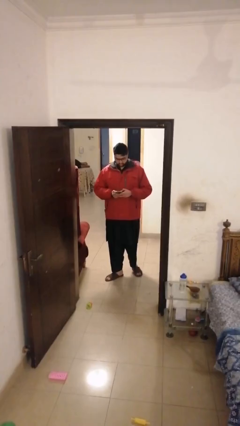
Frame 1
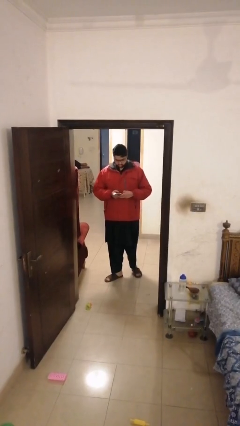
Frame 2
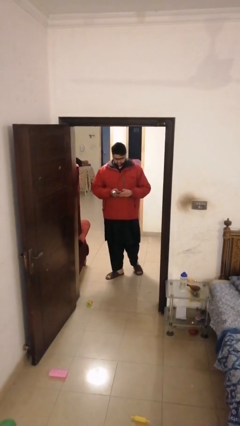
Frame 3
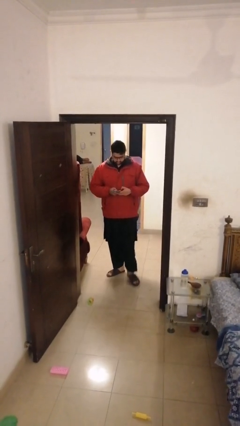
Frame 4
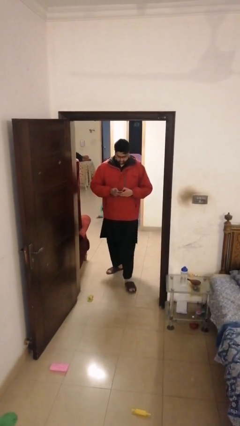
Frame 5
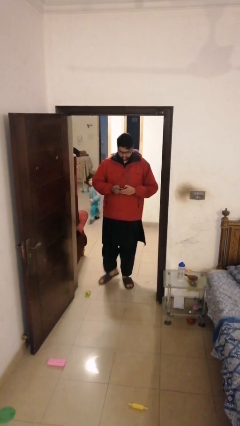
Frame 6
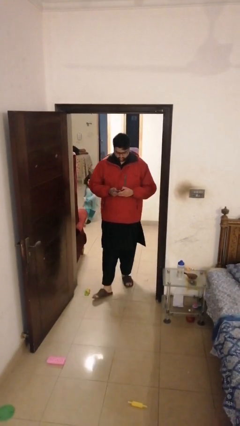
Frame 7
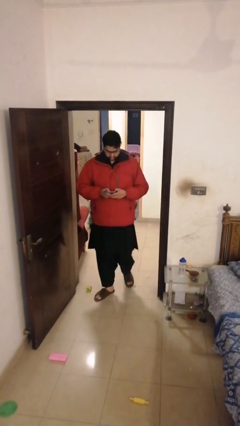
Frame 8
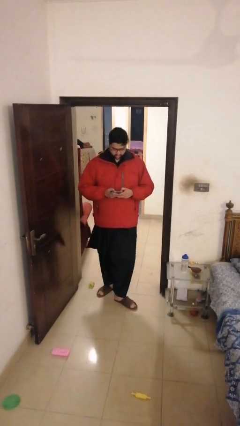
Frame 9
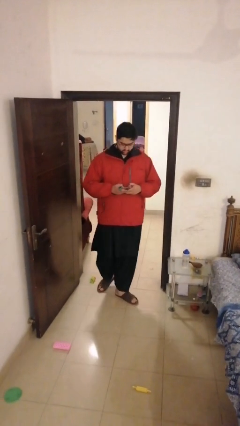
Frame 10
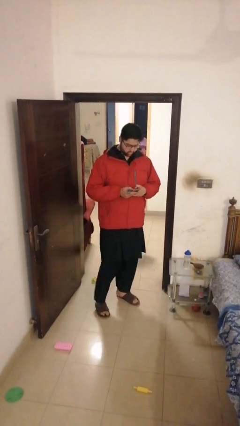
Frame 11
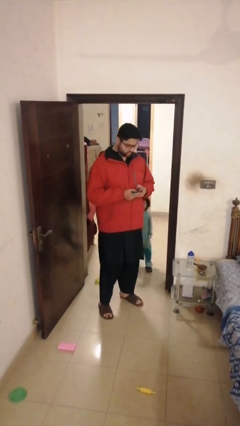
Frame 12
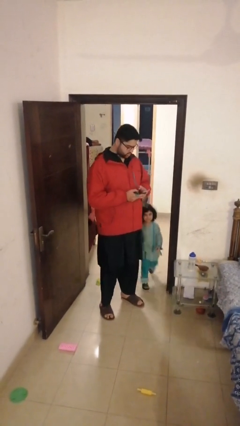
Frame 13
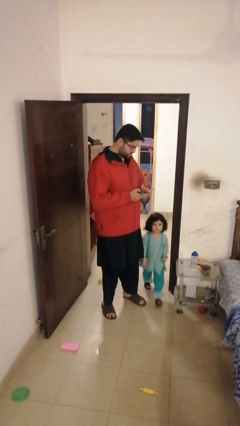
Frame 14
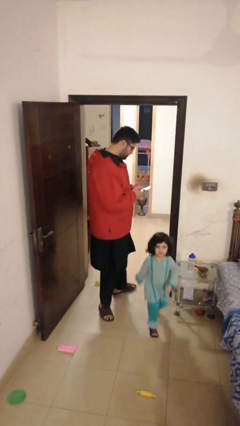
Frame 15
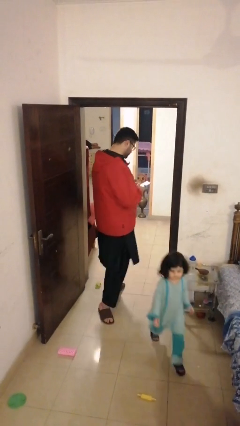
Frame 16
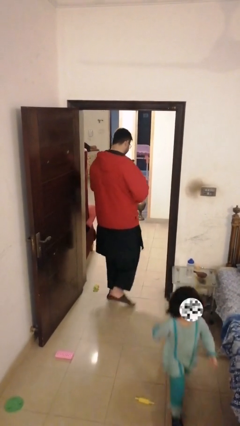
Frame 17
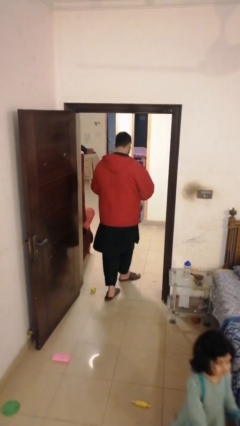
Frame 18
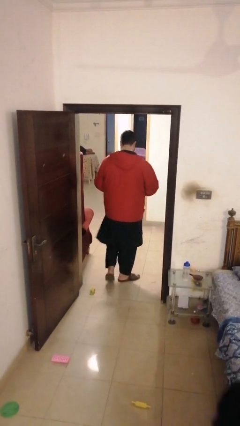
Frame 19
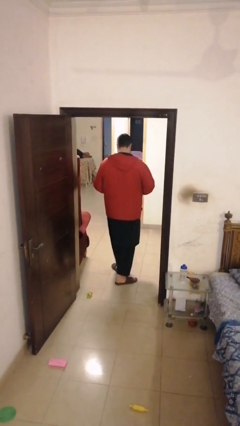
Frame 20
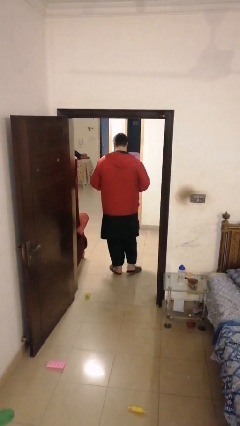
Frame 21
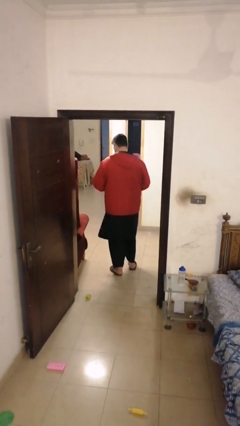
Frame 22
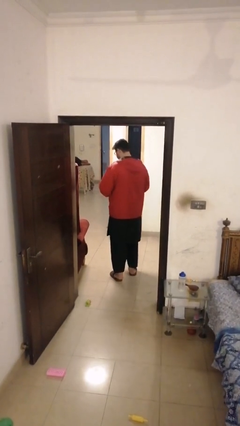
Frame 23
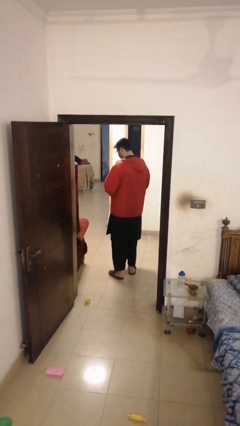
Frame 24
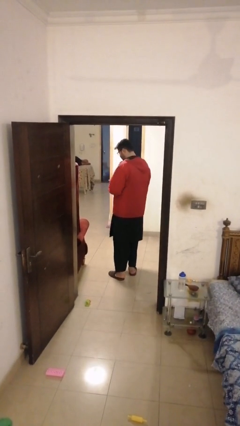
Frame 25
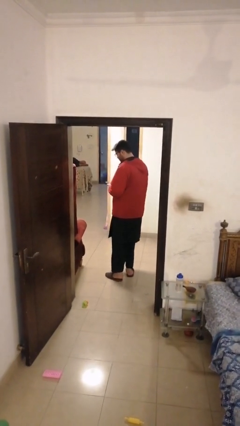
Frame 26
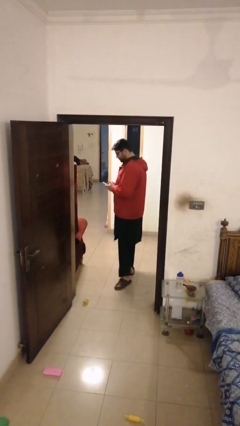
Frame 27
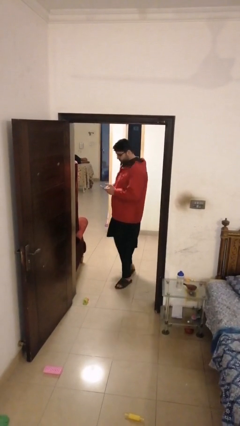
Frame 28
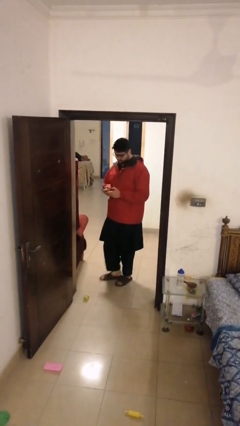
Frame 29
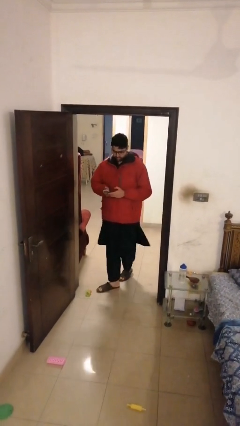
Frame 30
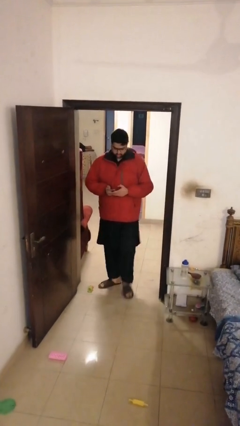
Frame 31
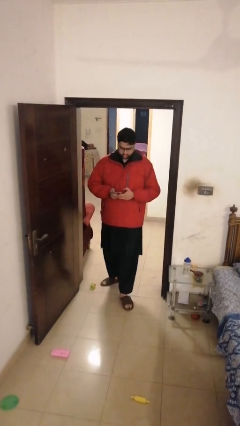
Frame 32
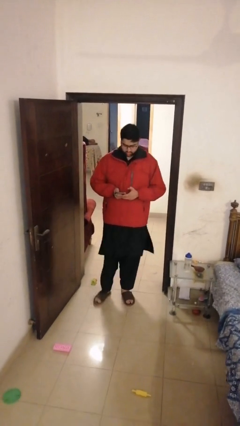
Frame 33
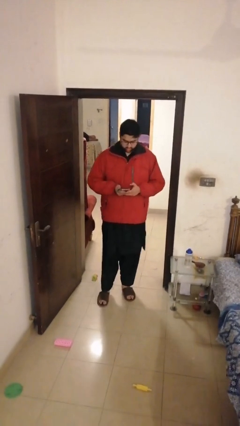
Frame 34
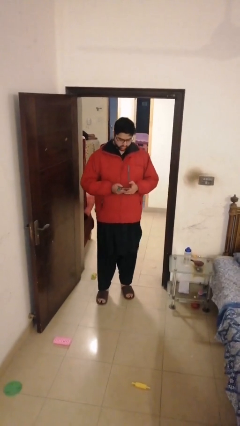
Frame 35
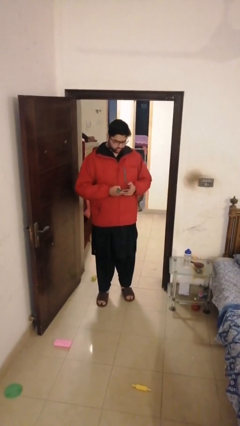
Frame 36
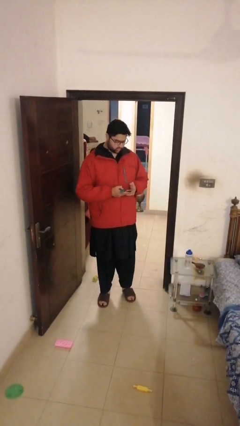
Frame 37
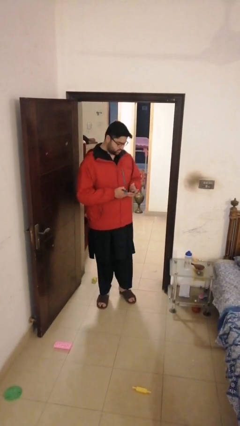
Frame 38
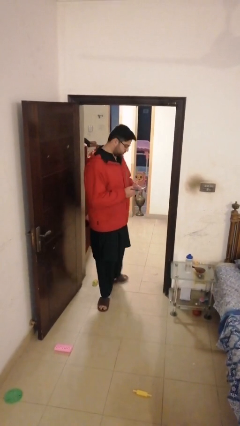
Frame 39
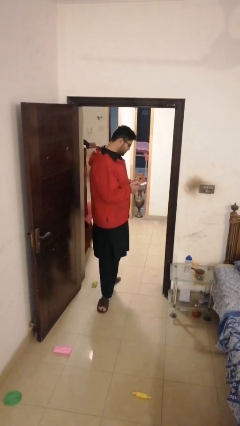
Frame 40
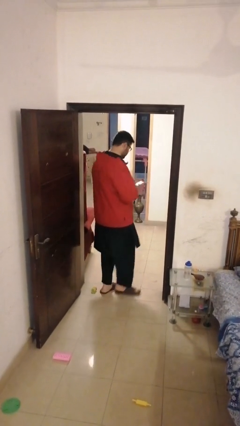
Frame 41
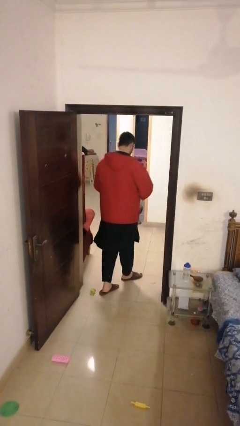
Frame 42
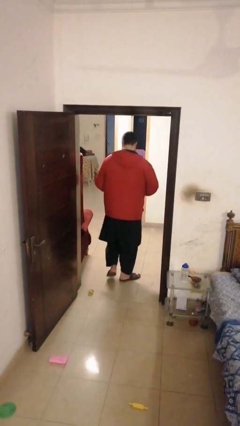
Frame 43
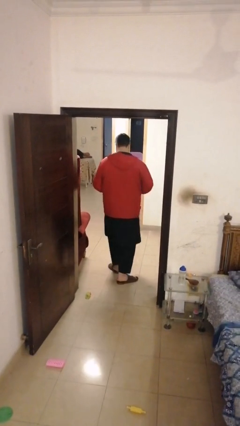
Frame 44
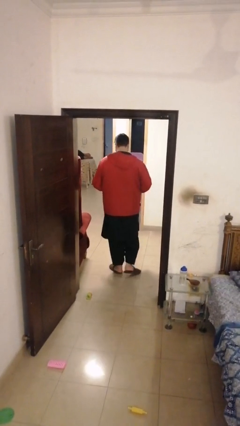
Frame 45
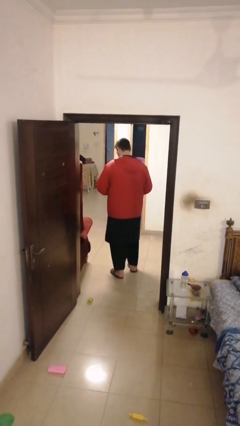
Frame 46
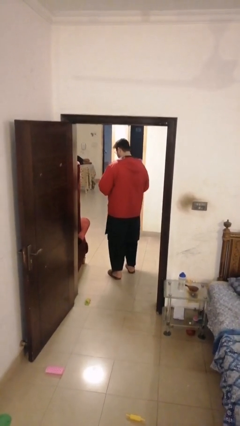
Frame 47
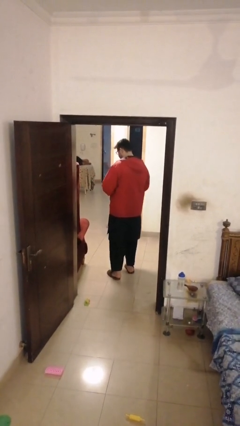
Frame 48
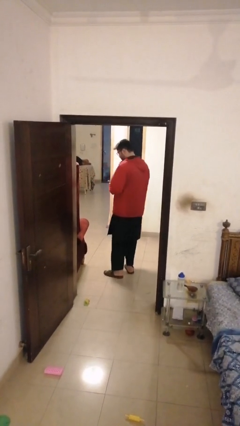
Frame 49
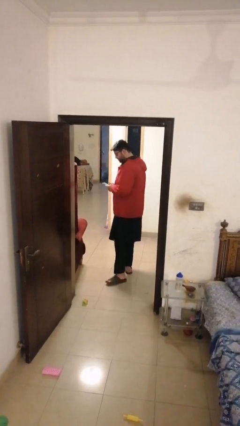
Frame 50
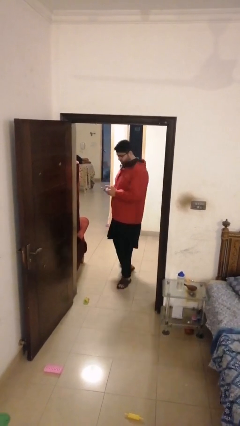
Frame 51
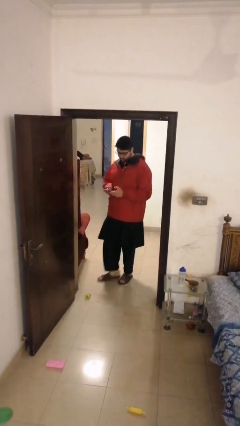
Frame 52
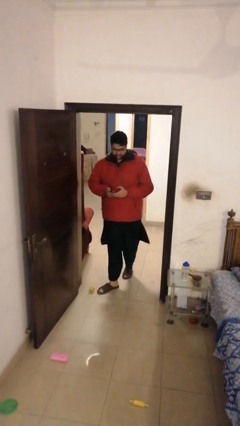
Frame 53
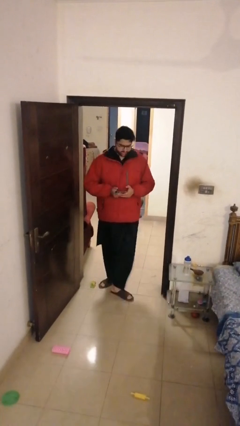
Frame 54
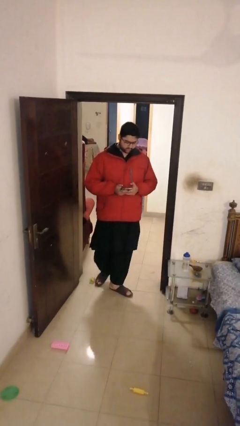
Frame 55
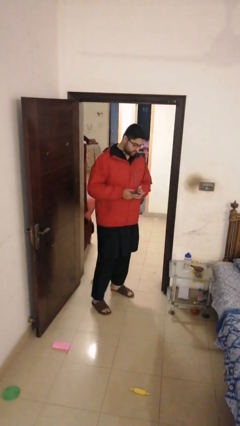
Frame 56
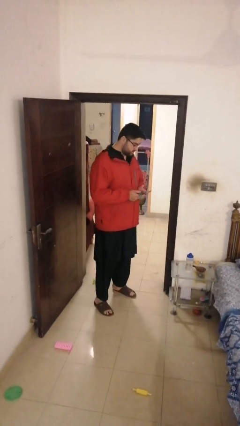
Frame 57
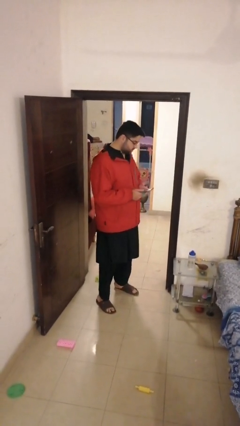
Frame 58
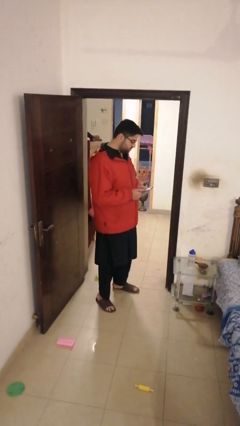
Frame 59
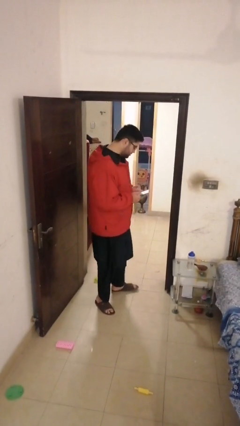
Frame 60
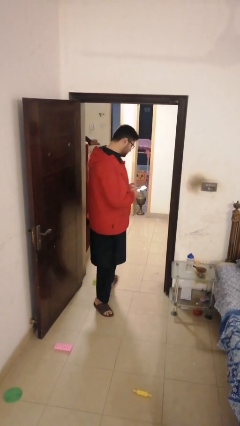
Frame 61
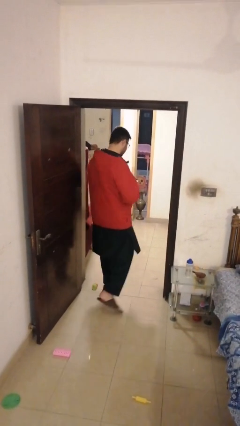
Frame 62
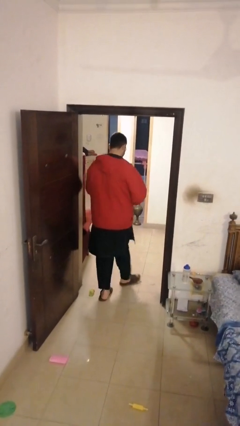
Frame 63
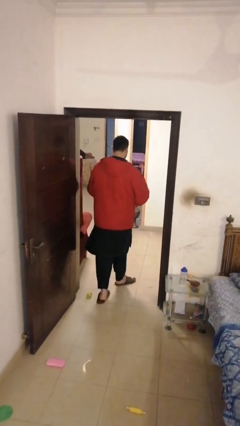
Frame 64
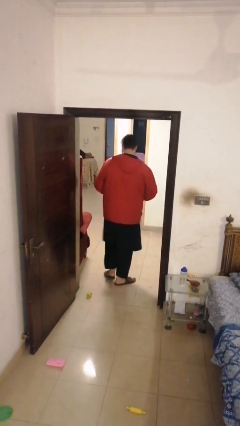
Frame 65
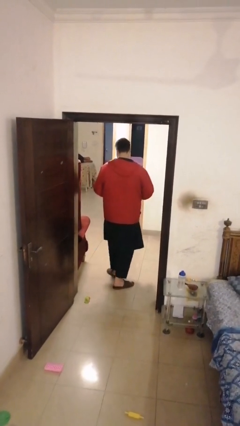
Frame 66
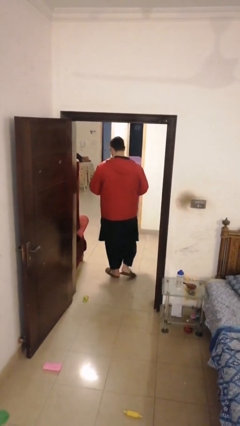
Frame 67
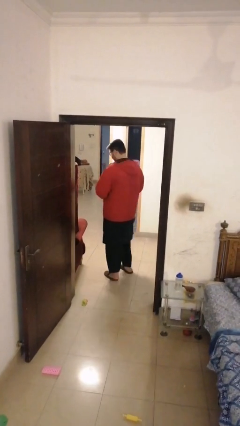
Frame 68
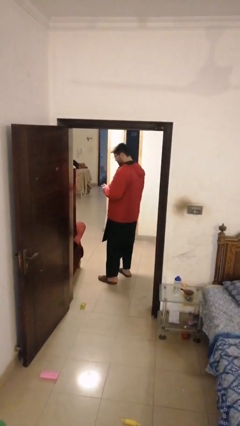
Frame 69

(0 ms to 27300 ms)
person texts on phone

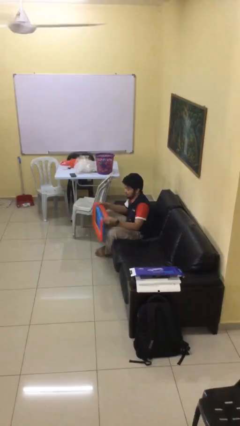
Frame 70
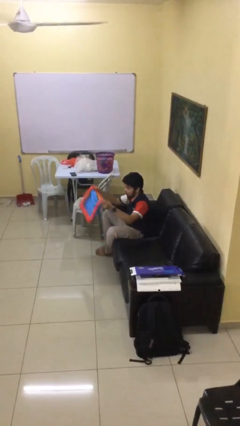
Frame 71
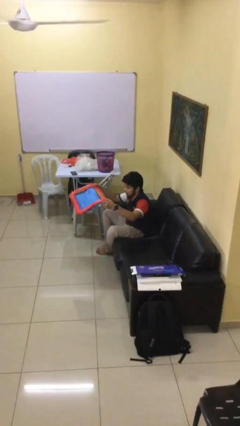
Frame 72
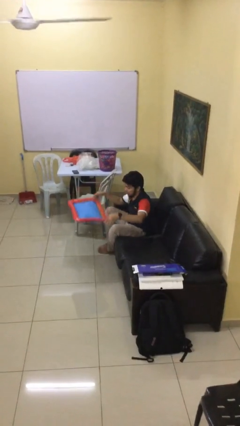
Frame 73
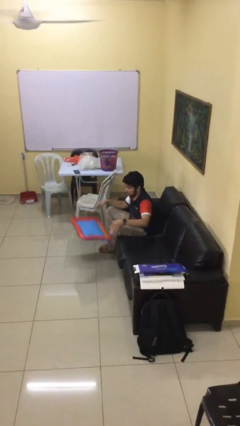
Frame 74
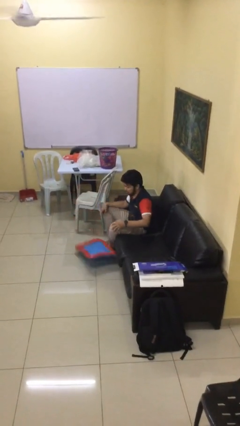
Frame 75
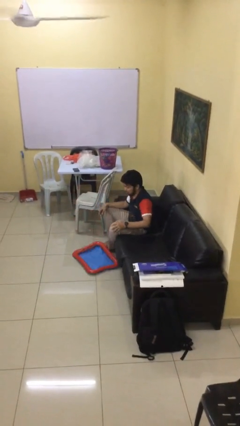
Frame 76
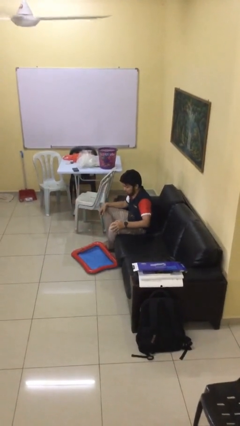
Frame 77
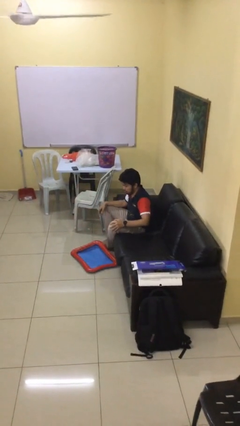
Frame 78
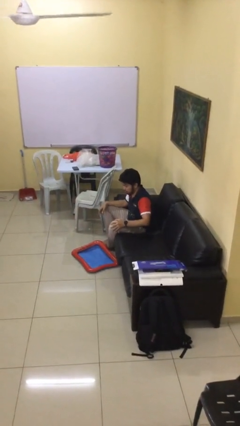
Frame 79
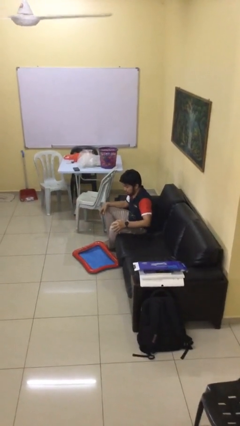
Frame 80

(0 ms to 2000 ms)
person drops object

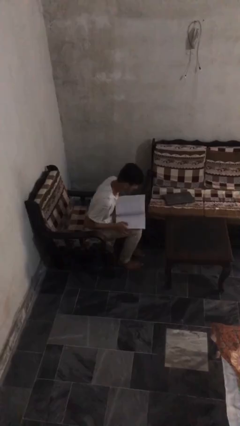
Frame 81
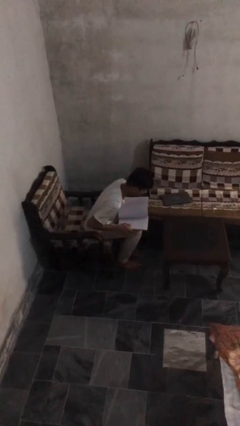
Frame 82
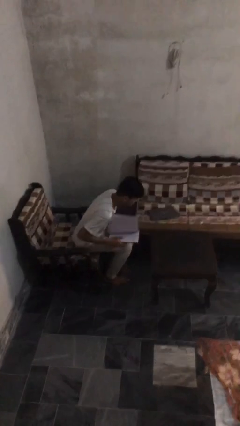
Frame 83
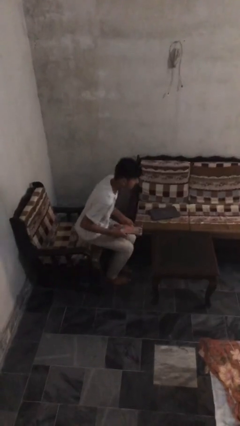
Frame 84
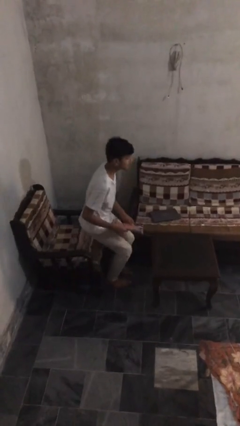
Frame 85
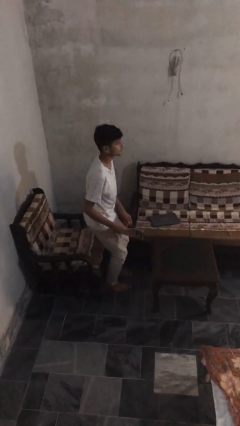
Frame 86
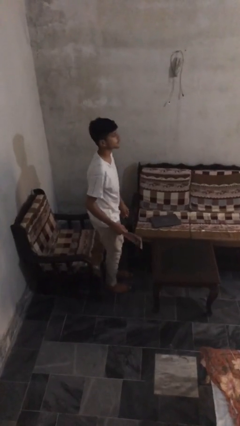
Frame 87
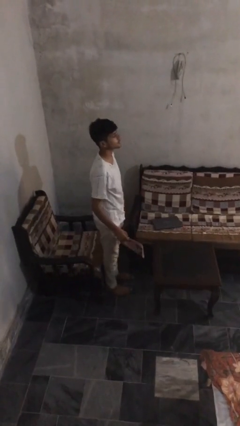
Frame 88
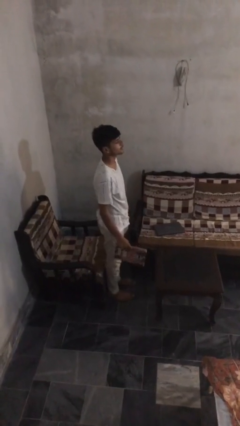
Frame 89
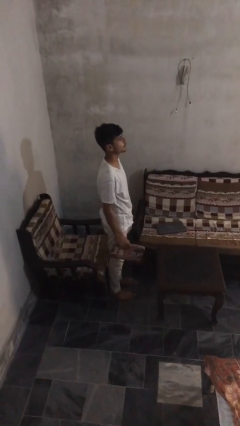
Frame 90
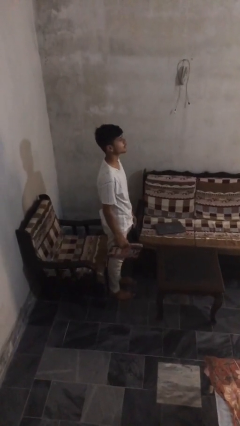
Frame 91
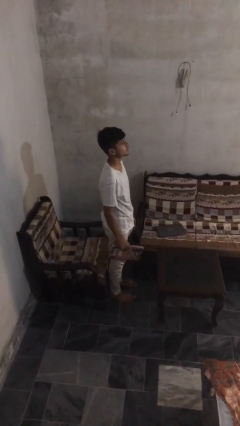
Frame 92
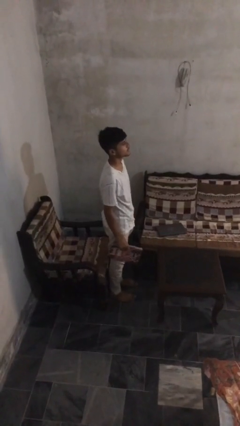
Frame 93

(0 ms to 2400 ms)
person stands up
